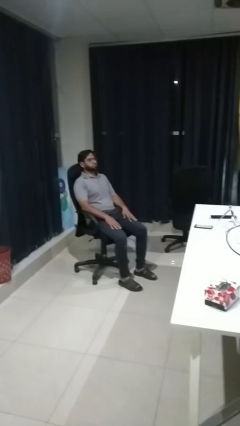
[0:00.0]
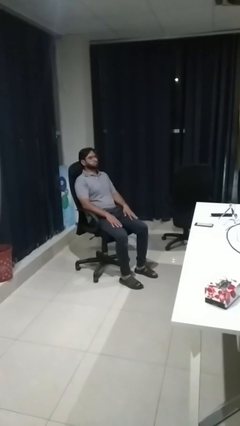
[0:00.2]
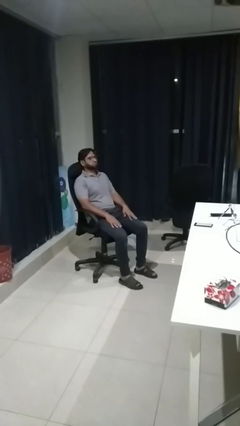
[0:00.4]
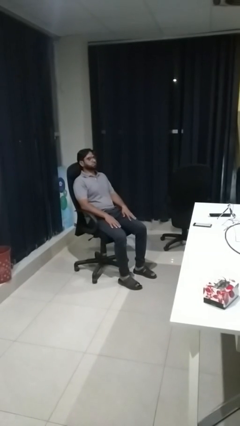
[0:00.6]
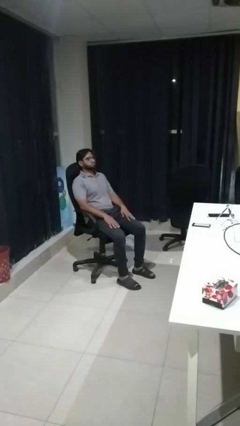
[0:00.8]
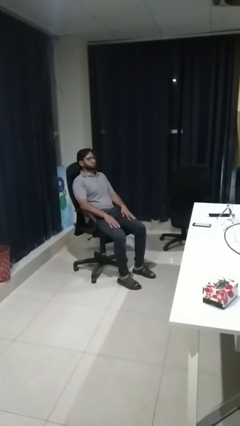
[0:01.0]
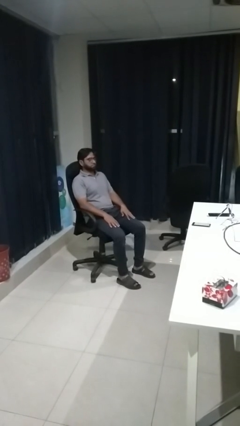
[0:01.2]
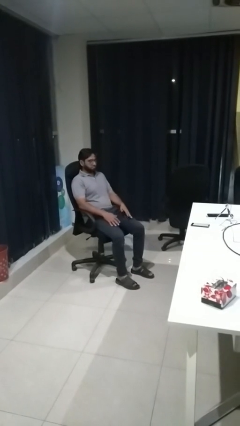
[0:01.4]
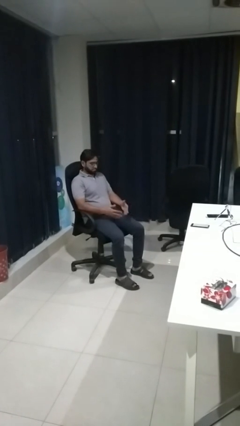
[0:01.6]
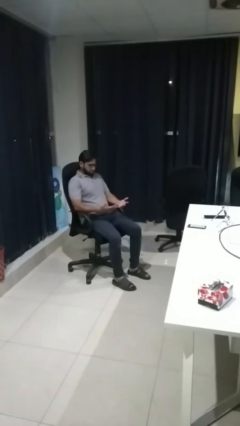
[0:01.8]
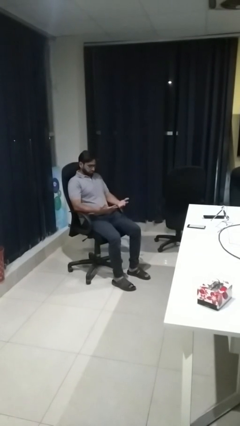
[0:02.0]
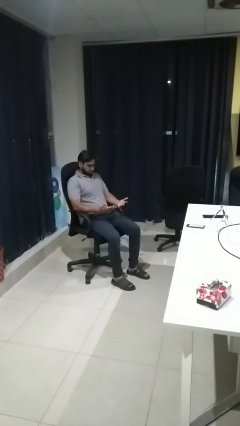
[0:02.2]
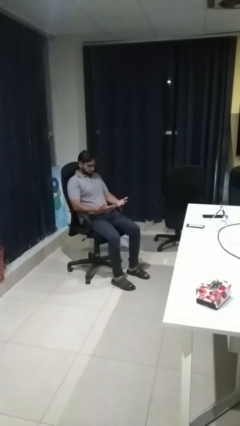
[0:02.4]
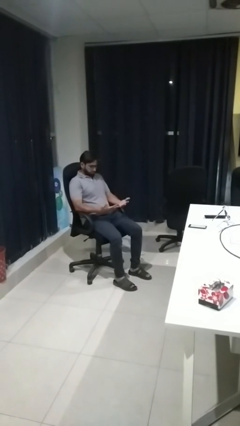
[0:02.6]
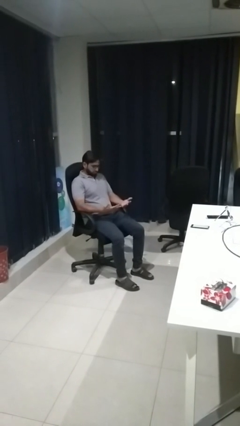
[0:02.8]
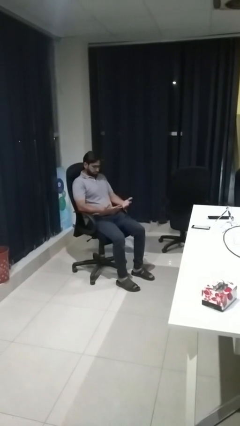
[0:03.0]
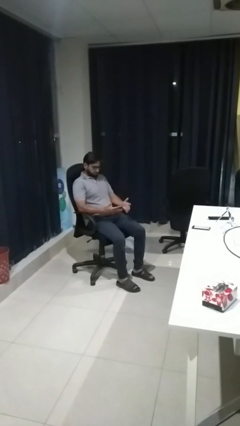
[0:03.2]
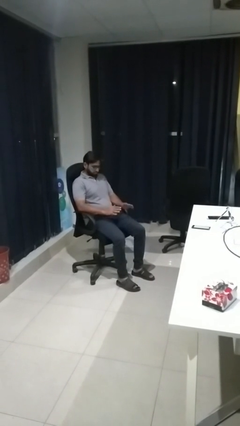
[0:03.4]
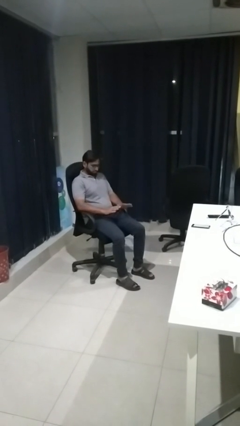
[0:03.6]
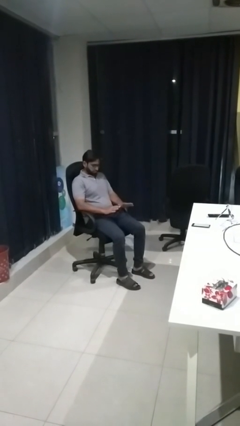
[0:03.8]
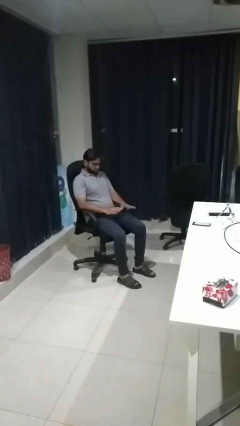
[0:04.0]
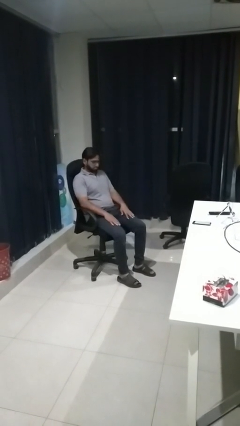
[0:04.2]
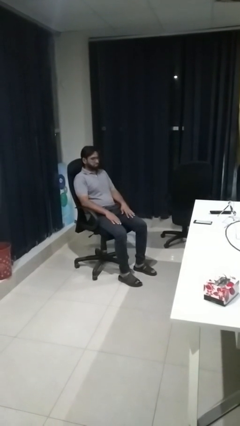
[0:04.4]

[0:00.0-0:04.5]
person looks at hands in lap

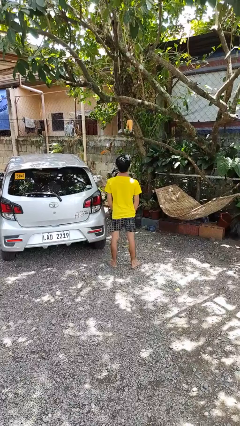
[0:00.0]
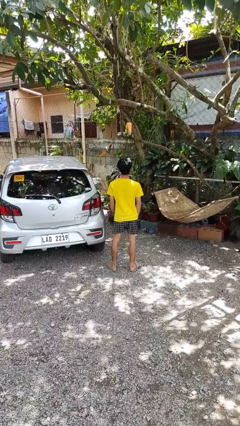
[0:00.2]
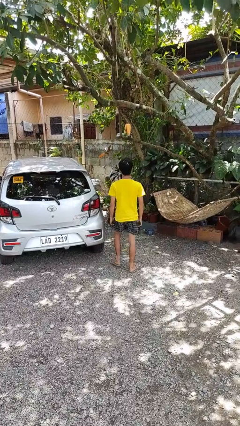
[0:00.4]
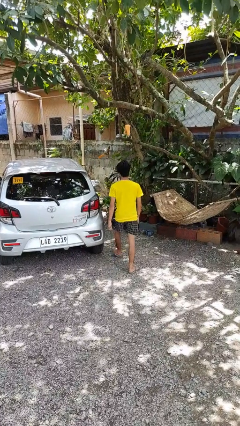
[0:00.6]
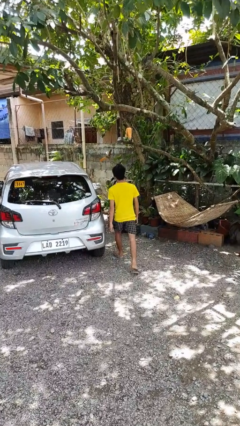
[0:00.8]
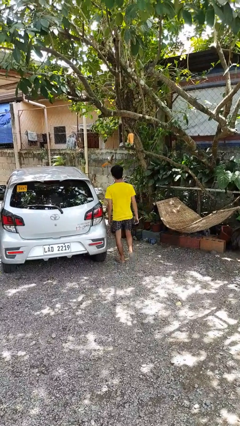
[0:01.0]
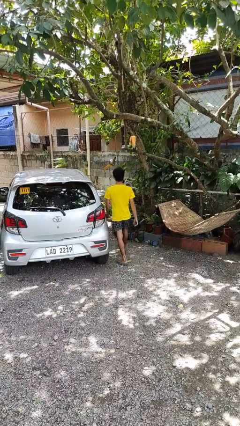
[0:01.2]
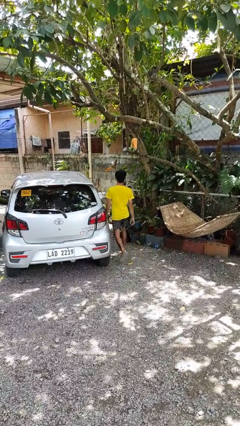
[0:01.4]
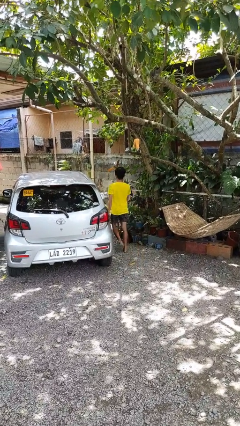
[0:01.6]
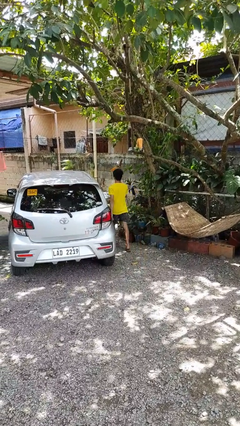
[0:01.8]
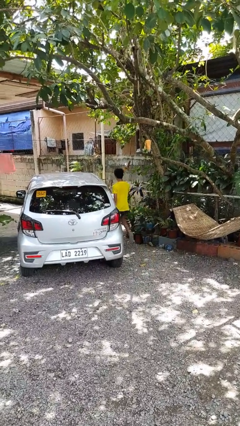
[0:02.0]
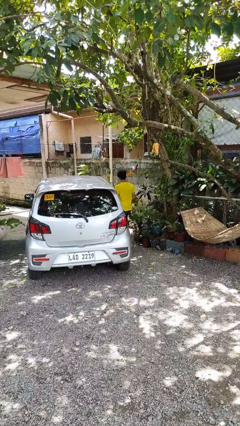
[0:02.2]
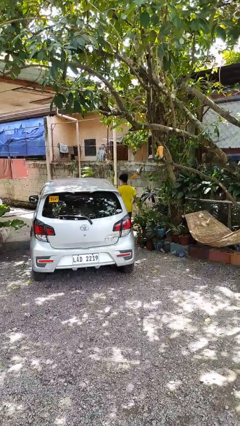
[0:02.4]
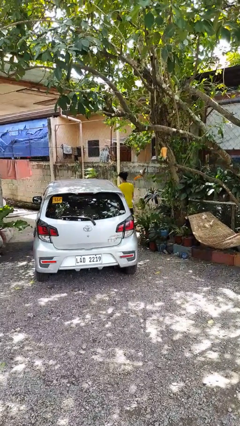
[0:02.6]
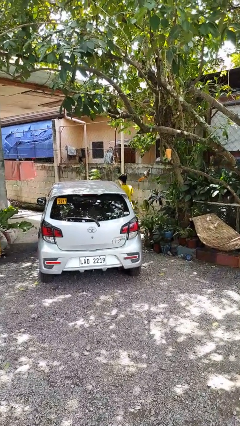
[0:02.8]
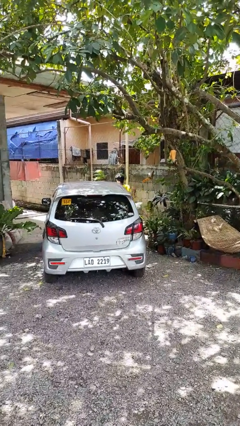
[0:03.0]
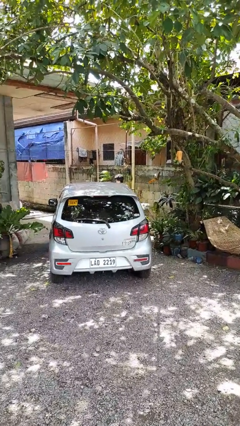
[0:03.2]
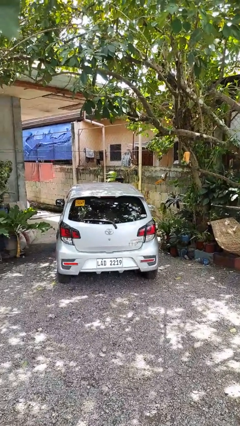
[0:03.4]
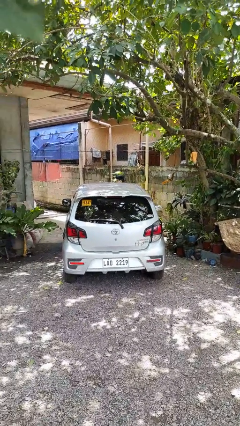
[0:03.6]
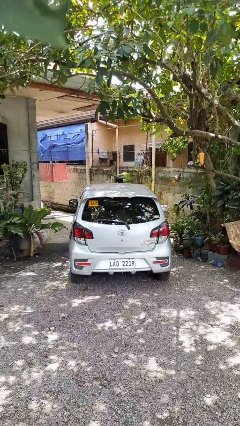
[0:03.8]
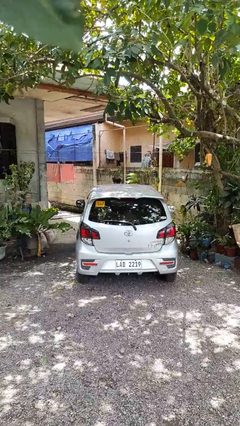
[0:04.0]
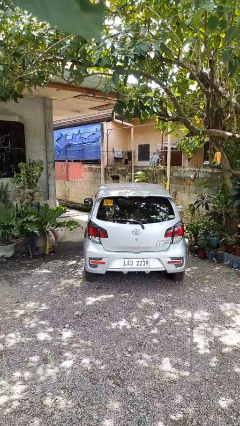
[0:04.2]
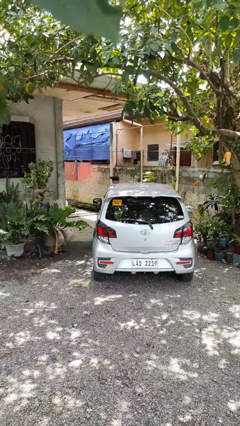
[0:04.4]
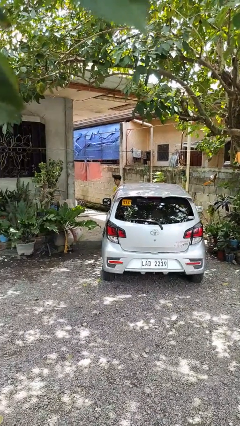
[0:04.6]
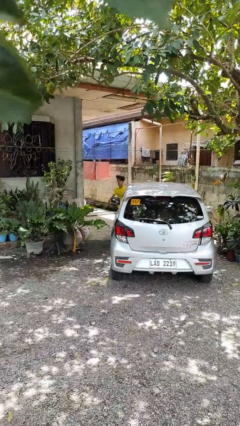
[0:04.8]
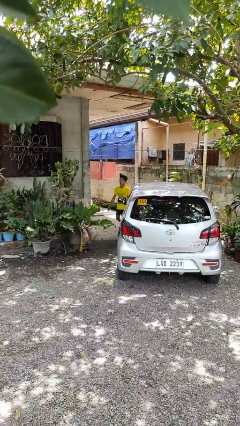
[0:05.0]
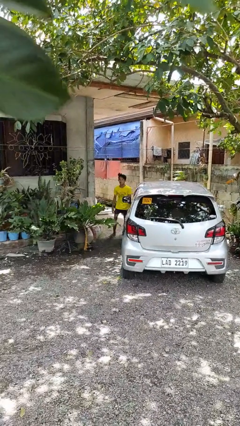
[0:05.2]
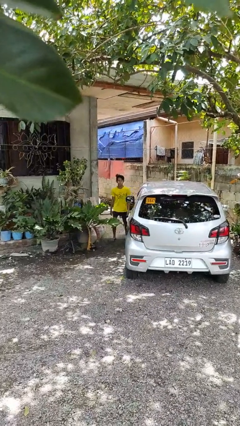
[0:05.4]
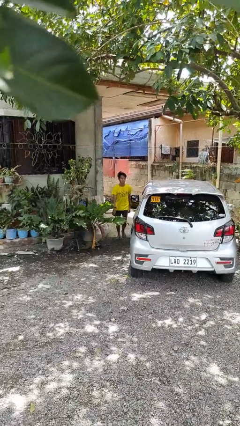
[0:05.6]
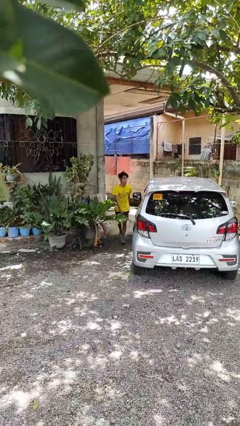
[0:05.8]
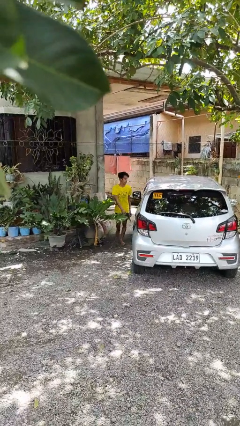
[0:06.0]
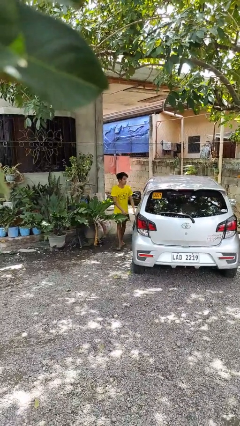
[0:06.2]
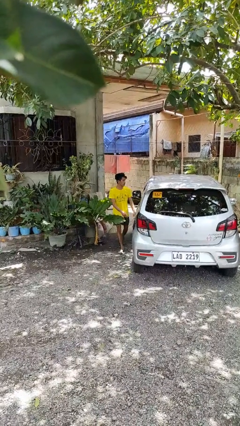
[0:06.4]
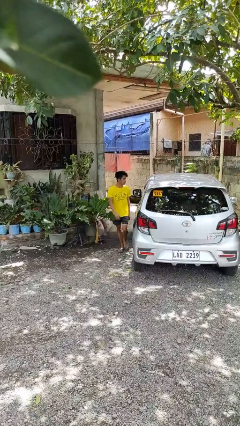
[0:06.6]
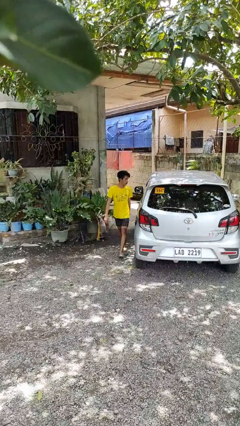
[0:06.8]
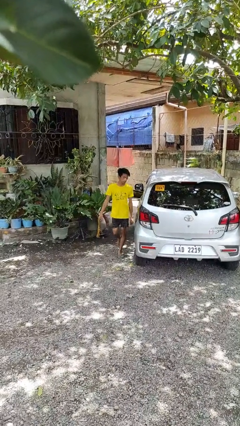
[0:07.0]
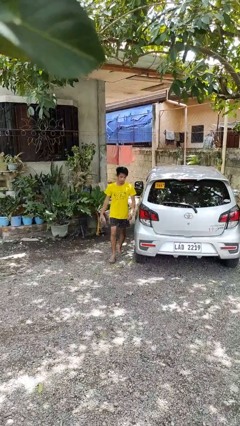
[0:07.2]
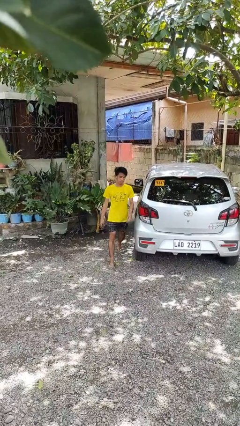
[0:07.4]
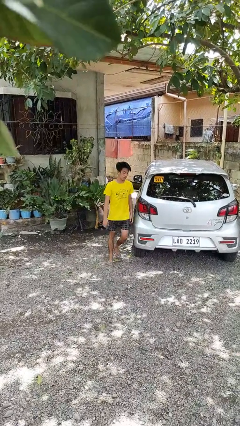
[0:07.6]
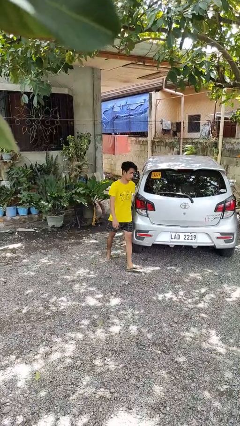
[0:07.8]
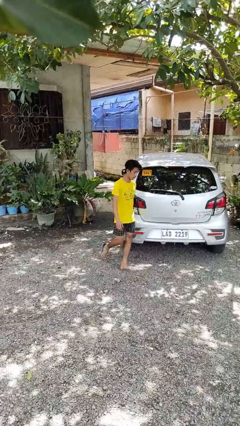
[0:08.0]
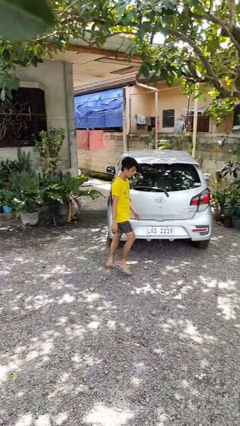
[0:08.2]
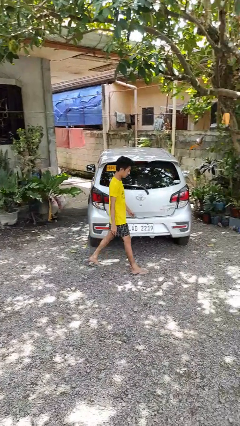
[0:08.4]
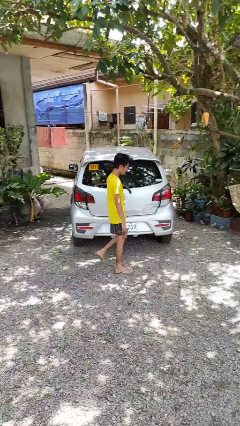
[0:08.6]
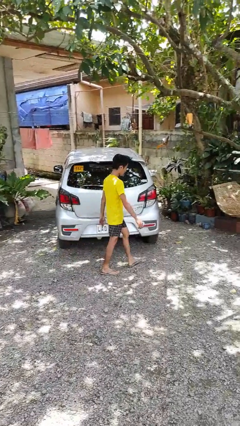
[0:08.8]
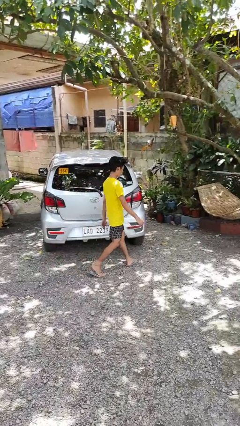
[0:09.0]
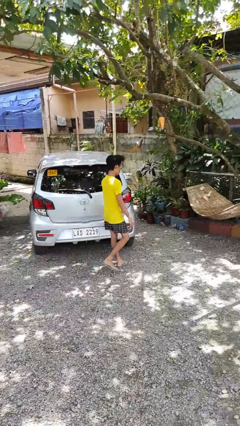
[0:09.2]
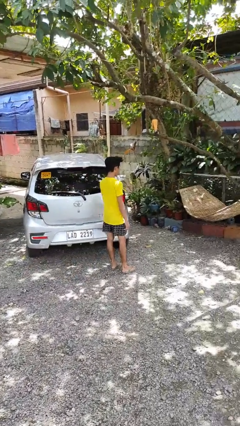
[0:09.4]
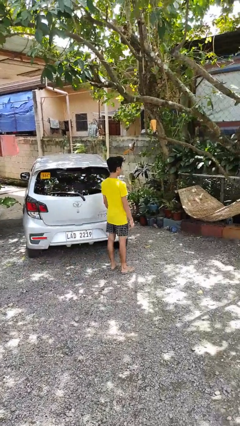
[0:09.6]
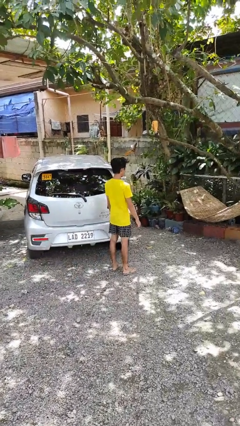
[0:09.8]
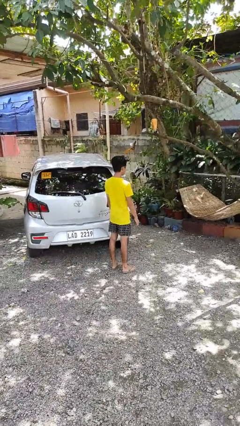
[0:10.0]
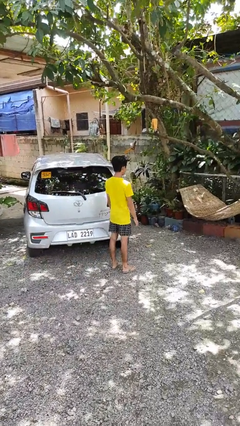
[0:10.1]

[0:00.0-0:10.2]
person walks around car

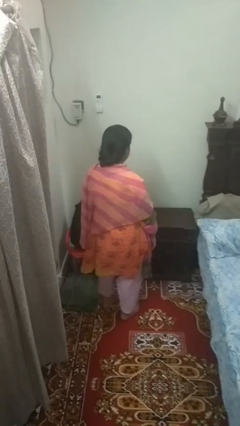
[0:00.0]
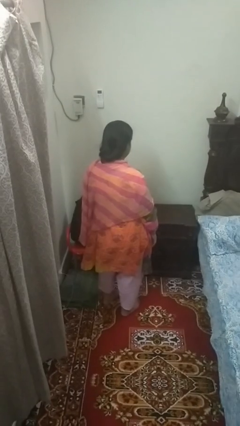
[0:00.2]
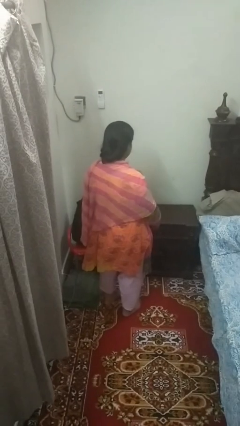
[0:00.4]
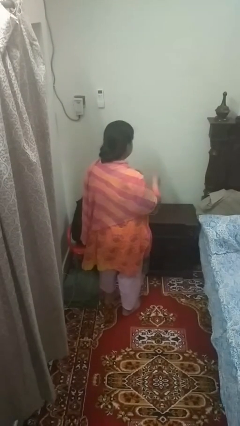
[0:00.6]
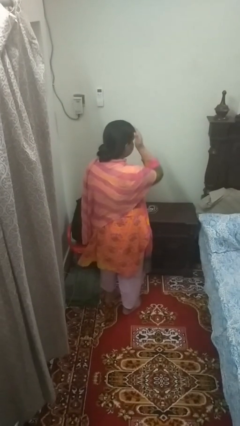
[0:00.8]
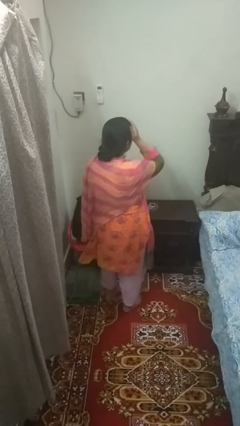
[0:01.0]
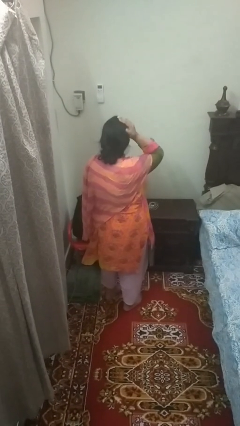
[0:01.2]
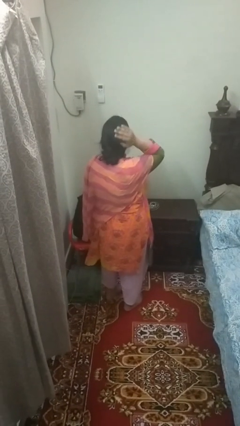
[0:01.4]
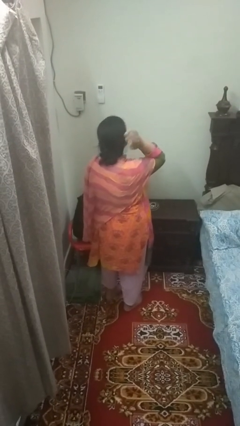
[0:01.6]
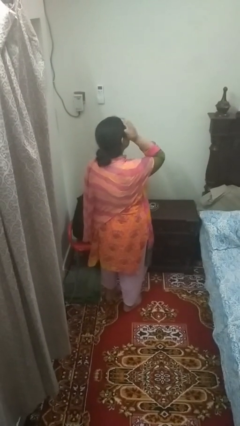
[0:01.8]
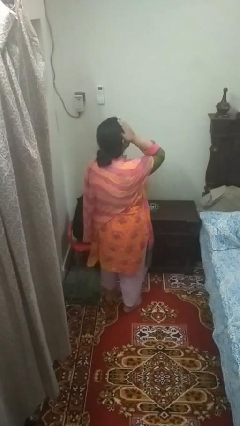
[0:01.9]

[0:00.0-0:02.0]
person strokes hair

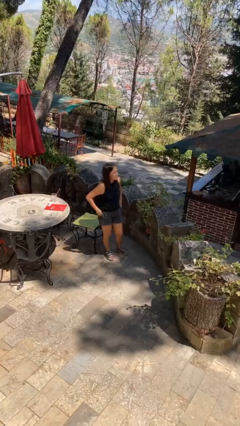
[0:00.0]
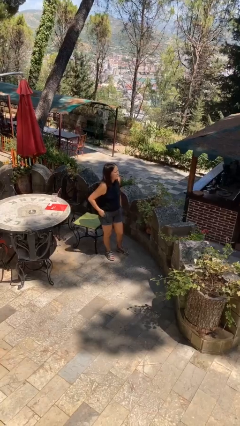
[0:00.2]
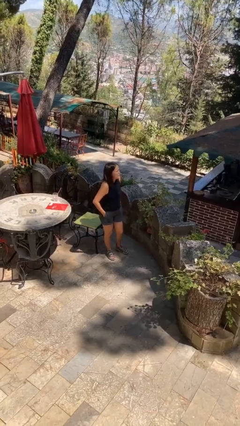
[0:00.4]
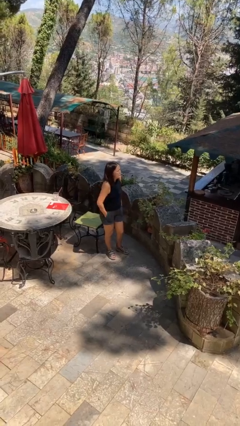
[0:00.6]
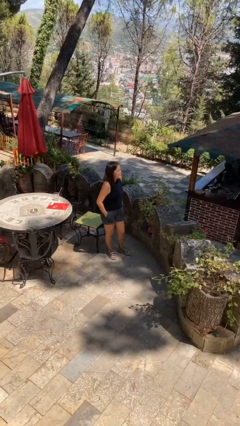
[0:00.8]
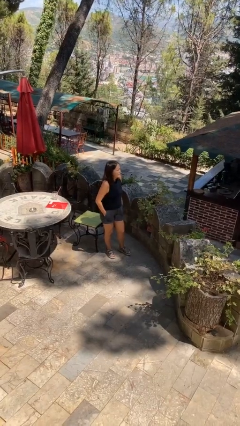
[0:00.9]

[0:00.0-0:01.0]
person puts phone into pocket

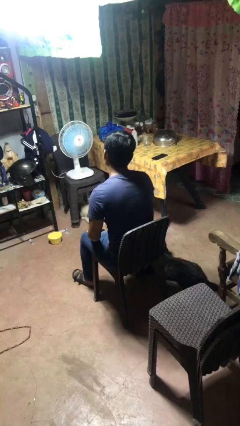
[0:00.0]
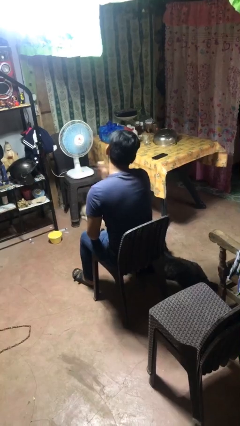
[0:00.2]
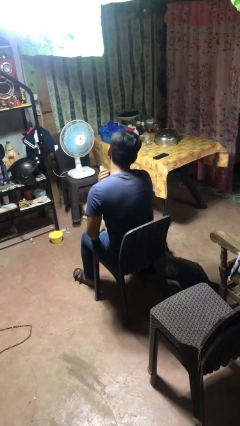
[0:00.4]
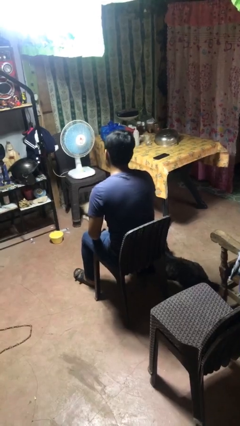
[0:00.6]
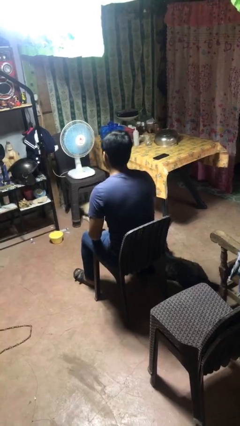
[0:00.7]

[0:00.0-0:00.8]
person swats bug
